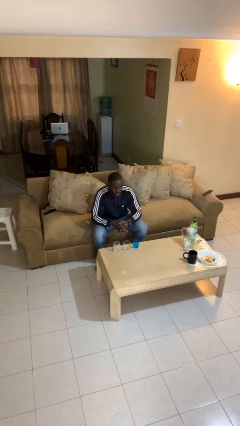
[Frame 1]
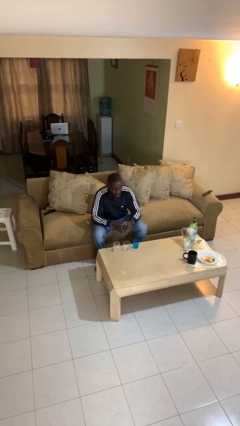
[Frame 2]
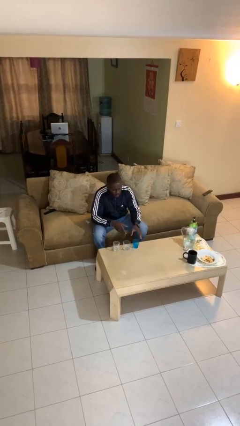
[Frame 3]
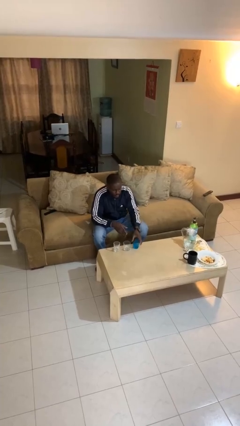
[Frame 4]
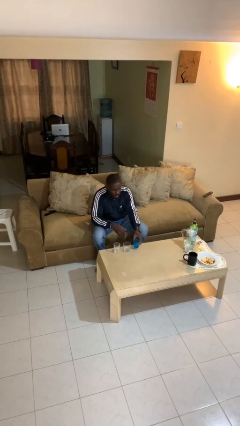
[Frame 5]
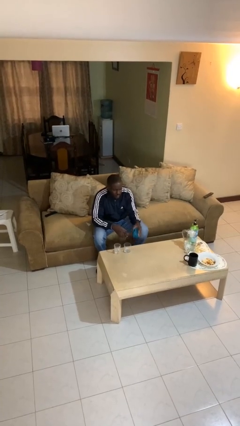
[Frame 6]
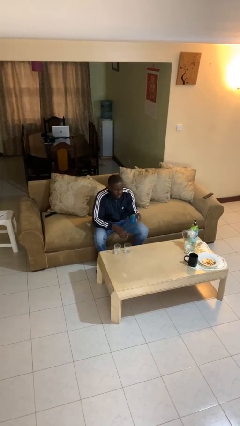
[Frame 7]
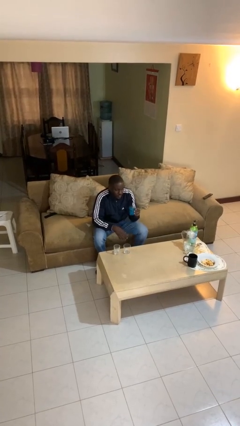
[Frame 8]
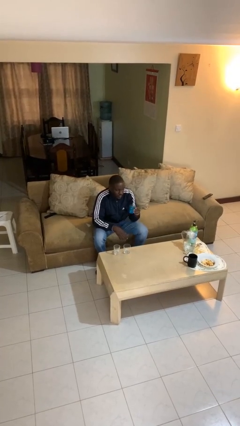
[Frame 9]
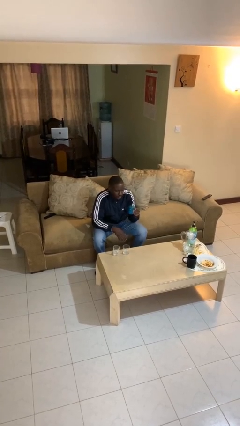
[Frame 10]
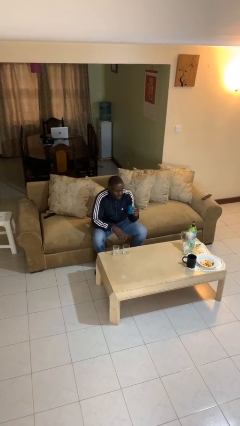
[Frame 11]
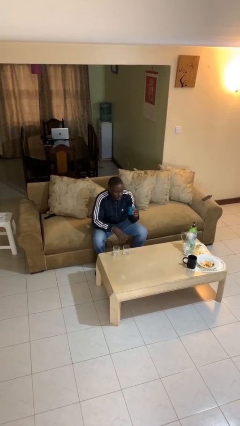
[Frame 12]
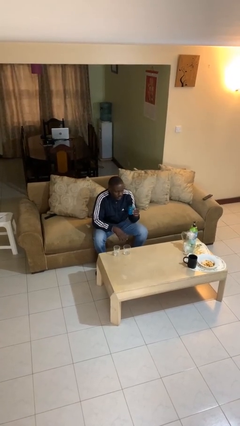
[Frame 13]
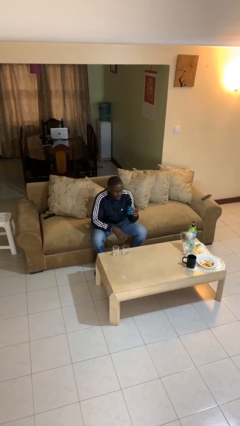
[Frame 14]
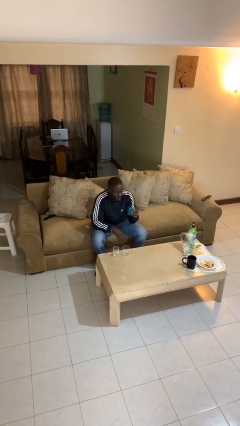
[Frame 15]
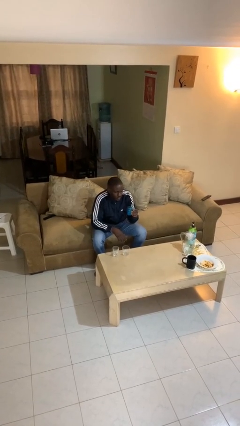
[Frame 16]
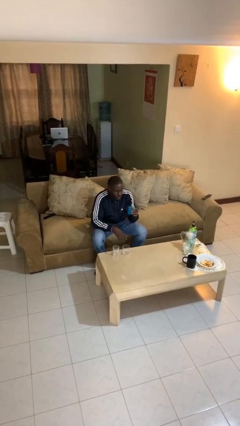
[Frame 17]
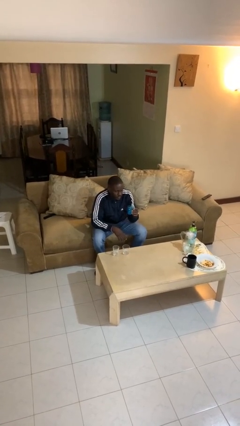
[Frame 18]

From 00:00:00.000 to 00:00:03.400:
person picks up object from table

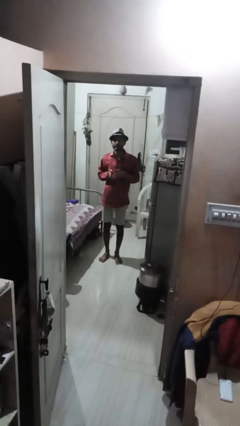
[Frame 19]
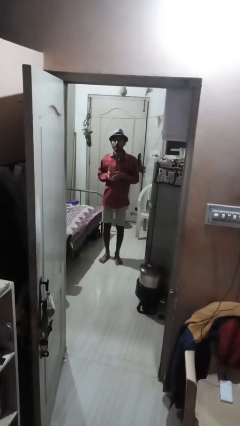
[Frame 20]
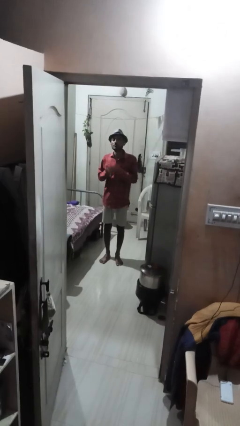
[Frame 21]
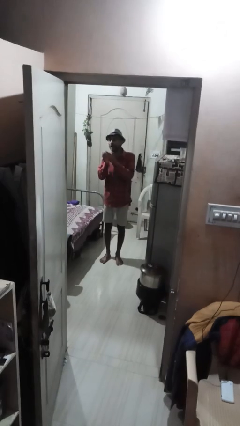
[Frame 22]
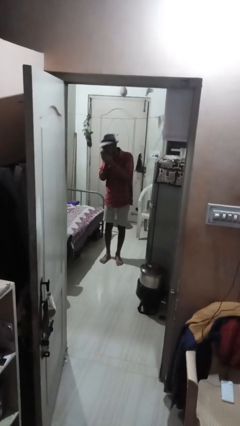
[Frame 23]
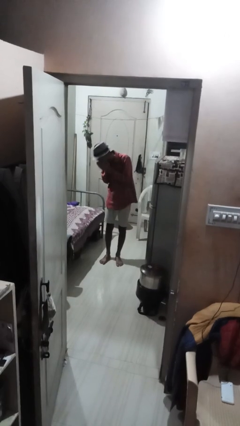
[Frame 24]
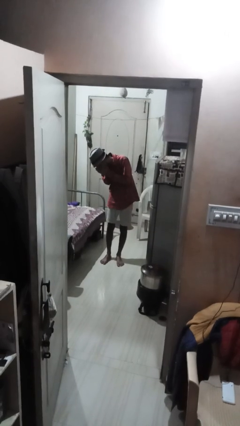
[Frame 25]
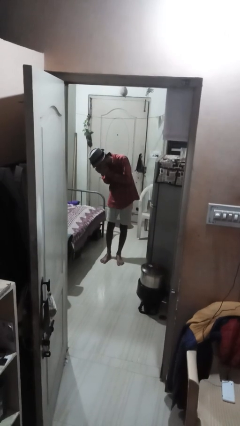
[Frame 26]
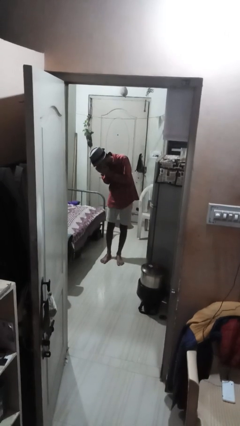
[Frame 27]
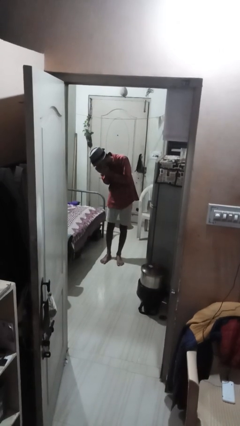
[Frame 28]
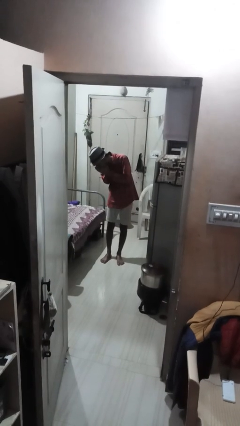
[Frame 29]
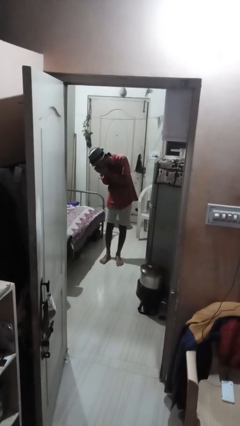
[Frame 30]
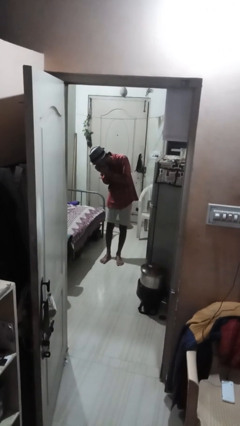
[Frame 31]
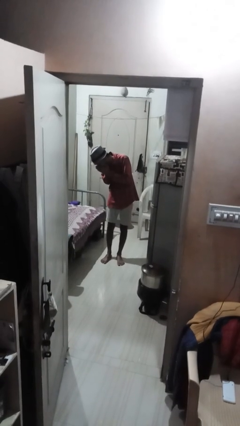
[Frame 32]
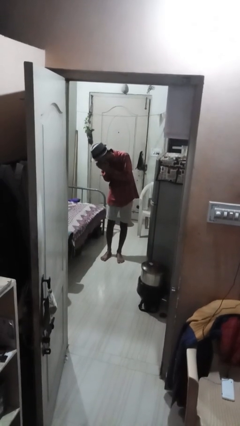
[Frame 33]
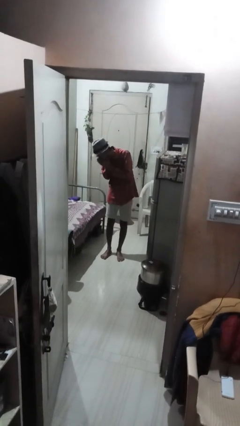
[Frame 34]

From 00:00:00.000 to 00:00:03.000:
person sneezes into hand

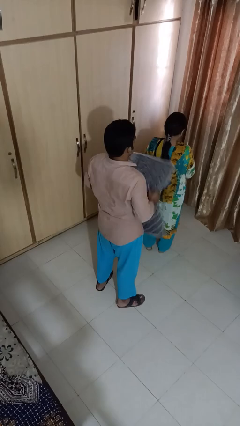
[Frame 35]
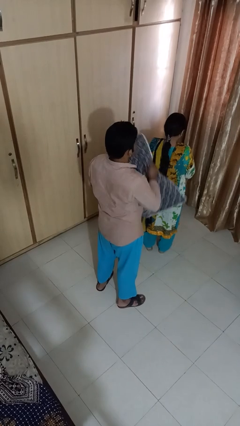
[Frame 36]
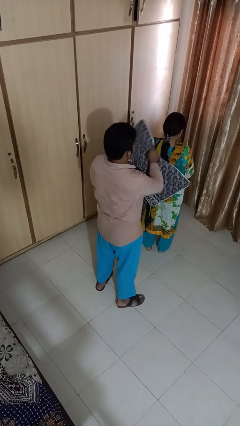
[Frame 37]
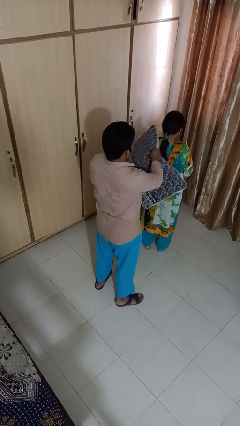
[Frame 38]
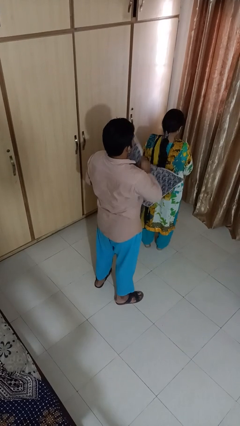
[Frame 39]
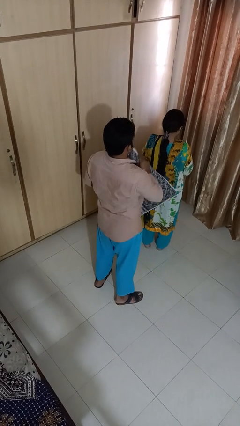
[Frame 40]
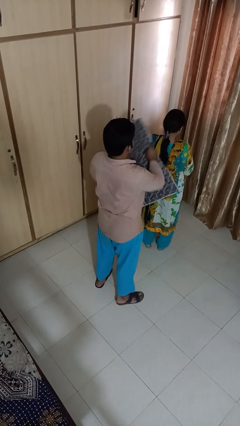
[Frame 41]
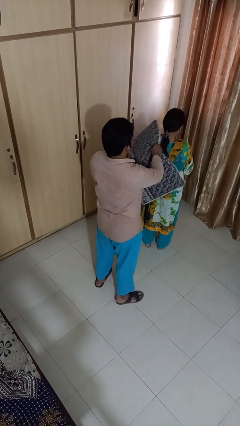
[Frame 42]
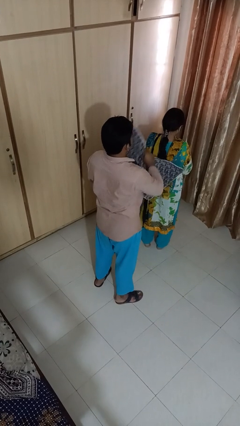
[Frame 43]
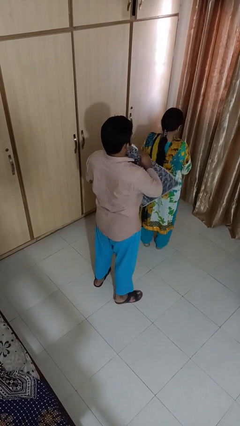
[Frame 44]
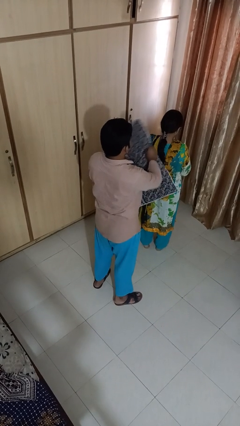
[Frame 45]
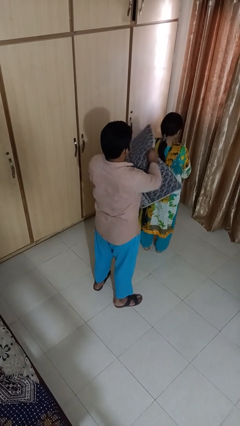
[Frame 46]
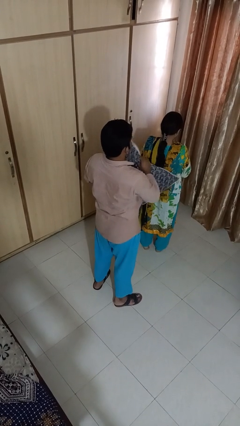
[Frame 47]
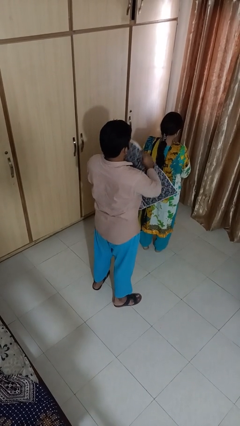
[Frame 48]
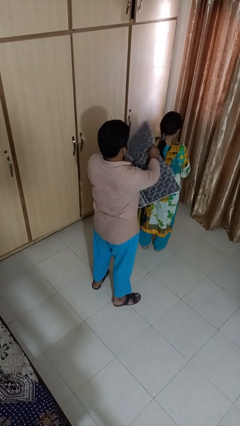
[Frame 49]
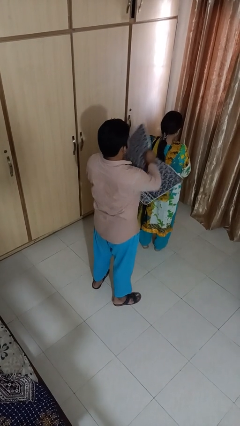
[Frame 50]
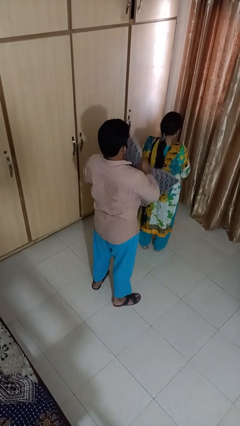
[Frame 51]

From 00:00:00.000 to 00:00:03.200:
person hits person with pillow

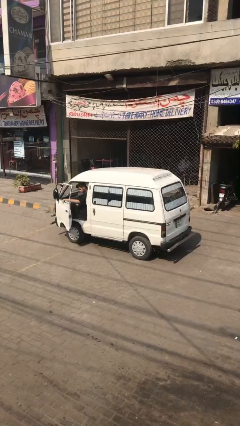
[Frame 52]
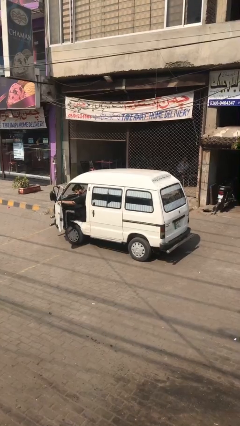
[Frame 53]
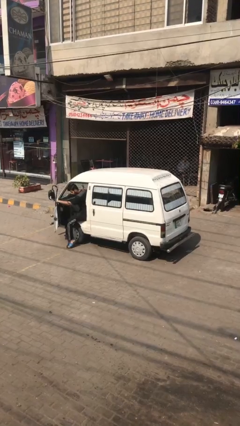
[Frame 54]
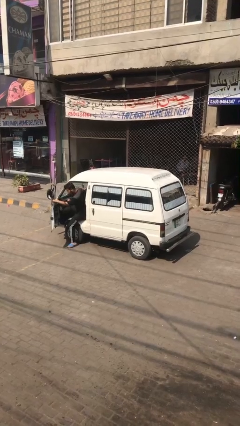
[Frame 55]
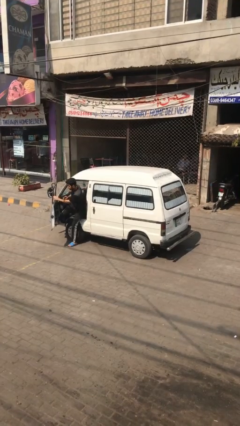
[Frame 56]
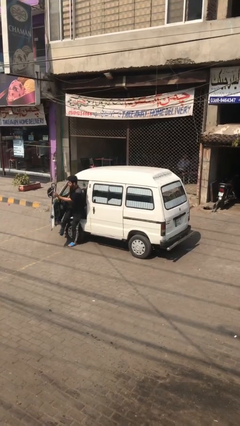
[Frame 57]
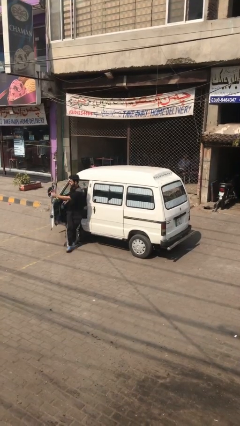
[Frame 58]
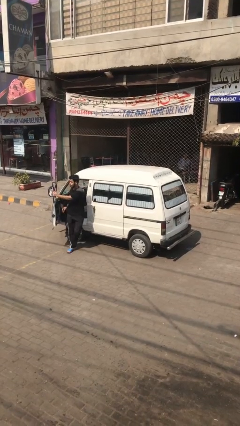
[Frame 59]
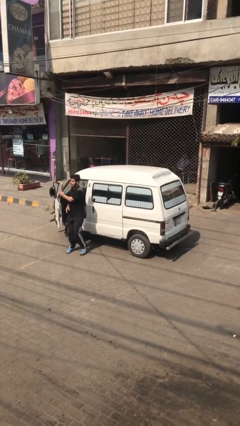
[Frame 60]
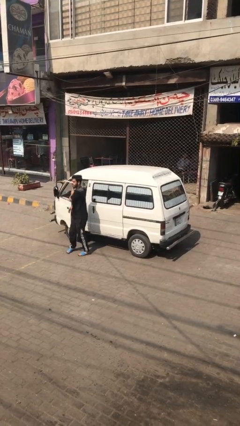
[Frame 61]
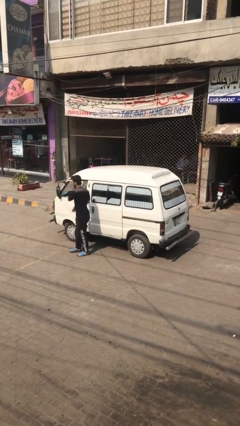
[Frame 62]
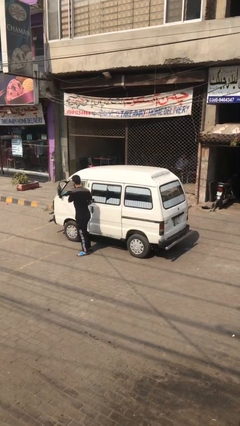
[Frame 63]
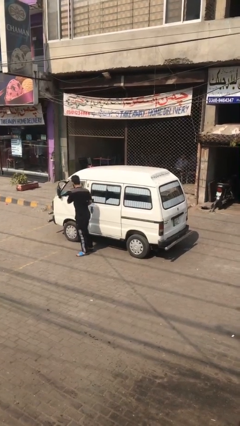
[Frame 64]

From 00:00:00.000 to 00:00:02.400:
car drops off person

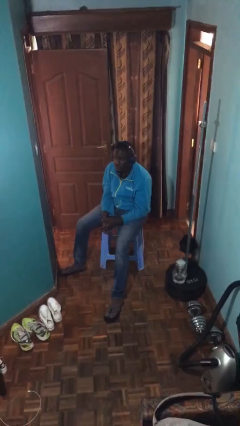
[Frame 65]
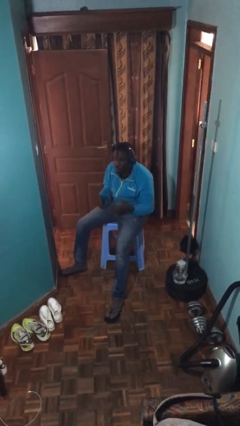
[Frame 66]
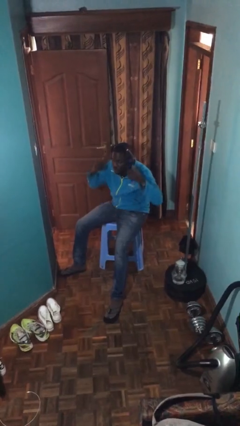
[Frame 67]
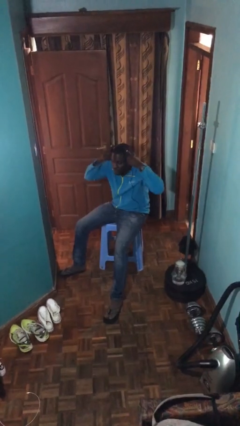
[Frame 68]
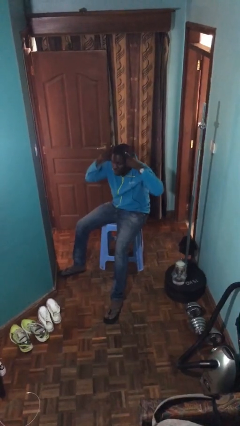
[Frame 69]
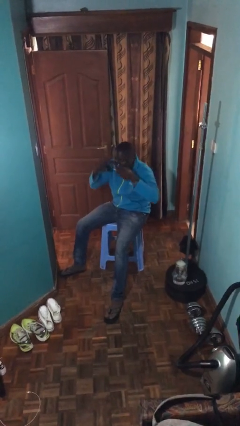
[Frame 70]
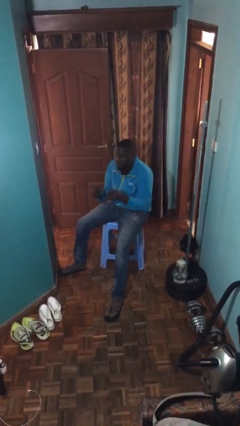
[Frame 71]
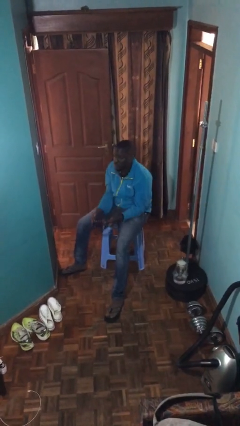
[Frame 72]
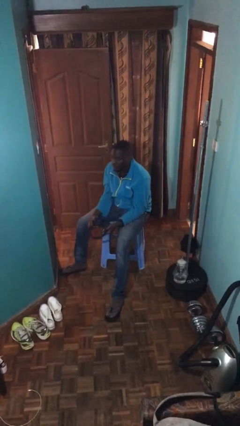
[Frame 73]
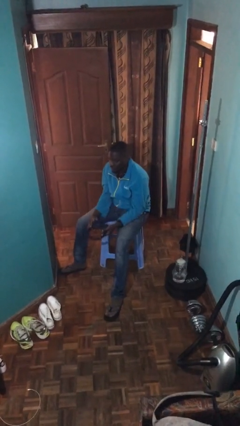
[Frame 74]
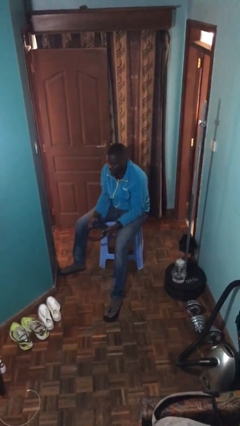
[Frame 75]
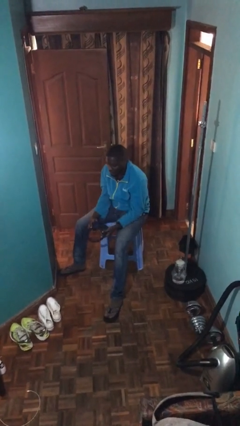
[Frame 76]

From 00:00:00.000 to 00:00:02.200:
person takes off headphones

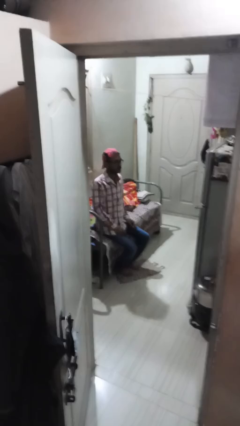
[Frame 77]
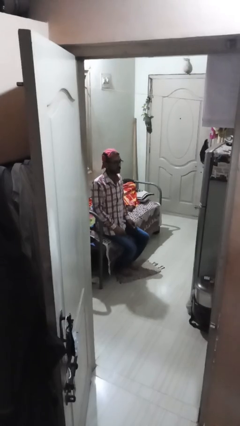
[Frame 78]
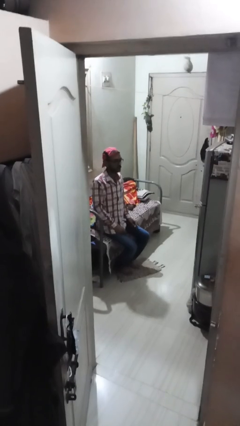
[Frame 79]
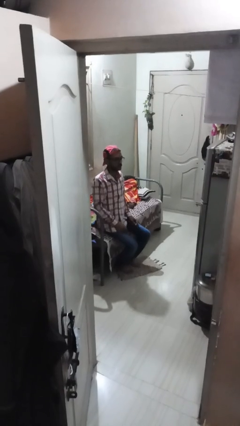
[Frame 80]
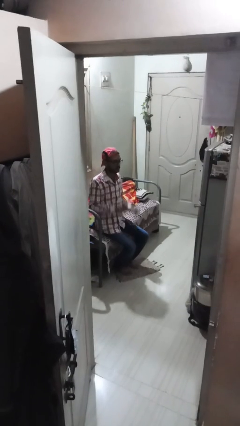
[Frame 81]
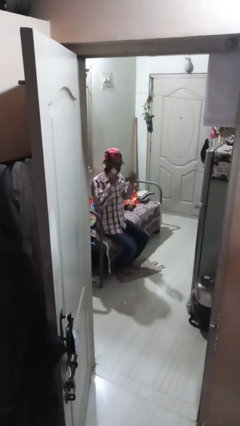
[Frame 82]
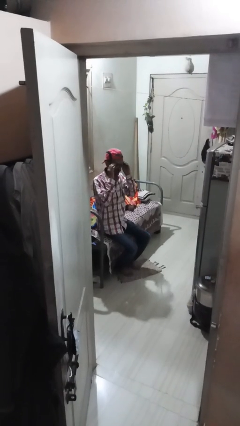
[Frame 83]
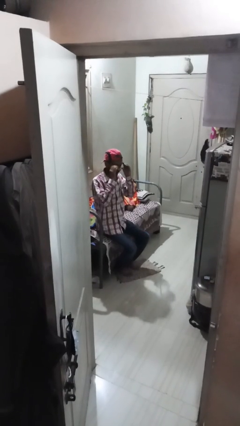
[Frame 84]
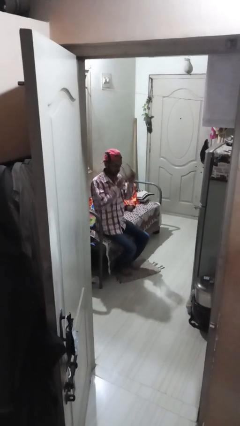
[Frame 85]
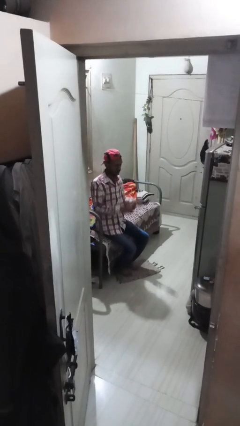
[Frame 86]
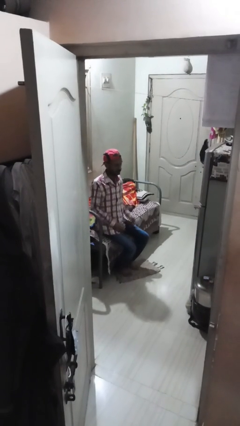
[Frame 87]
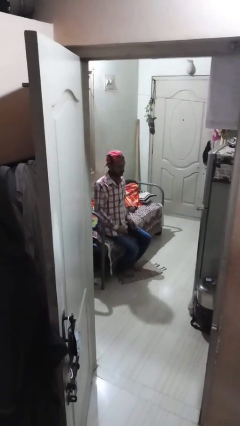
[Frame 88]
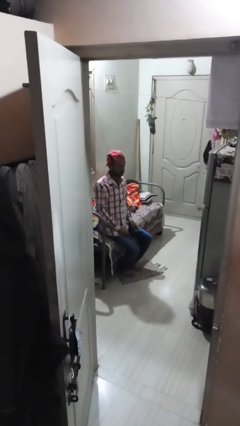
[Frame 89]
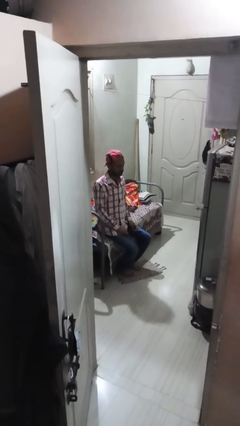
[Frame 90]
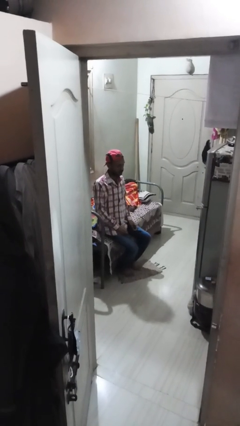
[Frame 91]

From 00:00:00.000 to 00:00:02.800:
person takes off glasses

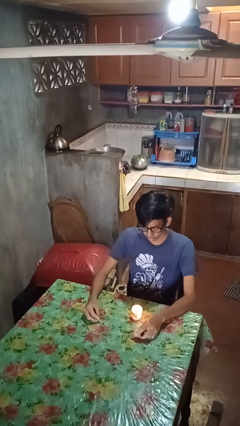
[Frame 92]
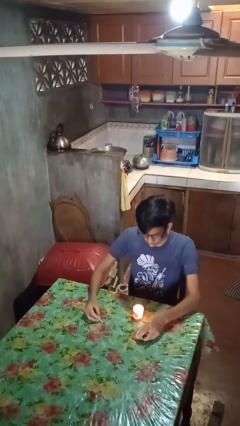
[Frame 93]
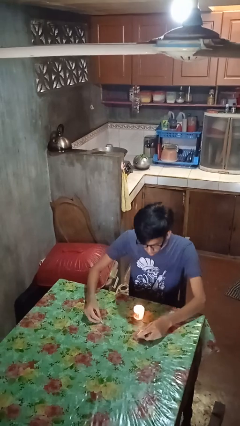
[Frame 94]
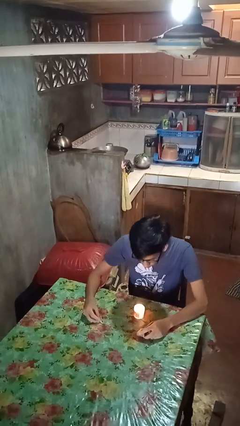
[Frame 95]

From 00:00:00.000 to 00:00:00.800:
person extinguishes candle
